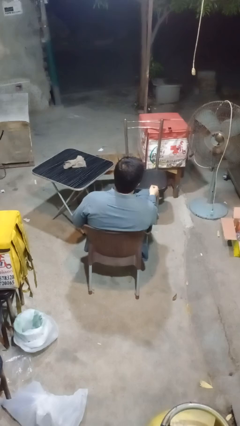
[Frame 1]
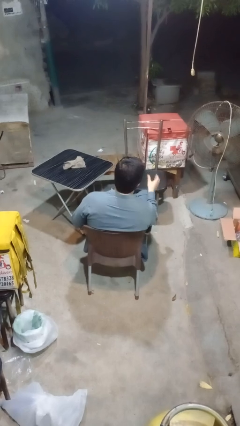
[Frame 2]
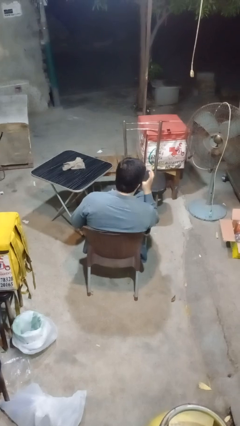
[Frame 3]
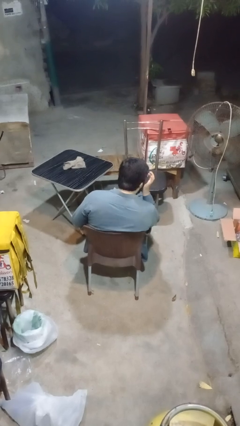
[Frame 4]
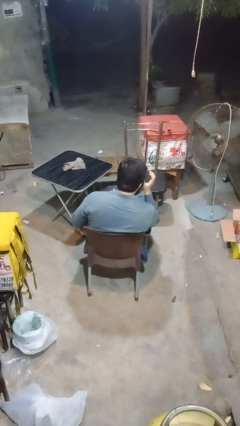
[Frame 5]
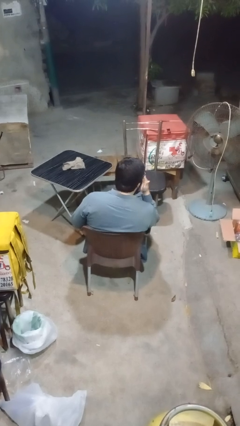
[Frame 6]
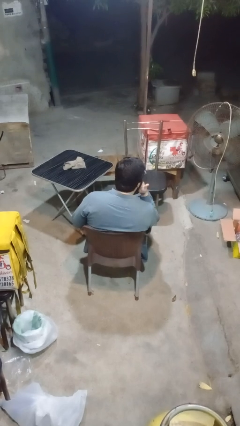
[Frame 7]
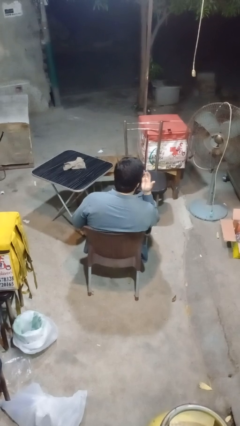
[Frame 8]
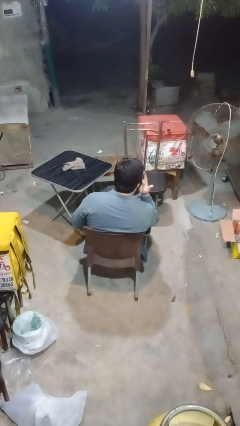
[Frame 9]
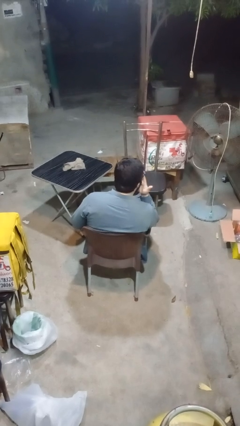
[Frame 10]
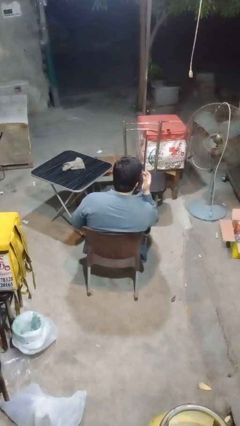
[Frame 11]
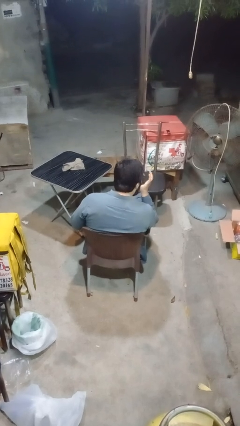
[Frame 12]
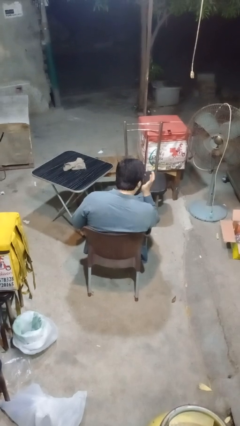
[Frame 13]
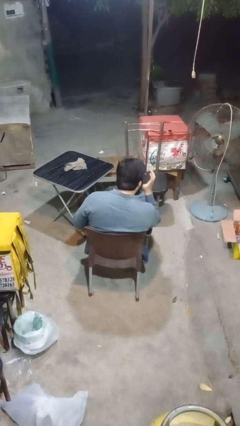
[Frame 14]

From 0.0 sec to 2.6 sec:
person licks fingers

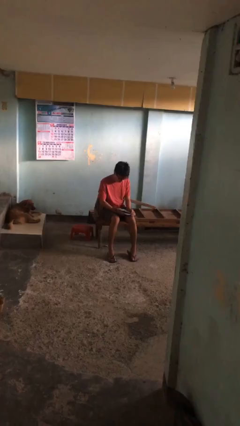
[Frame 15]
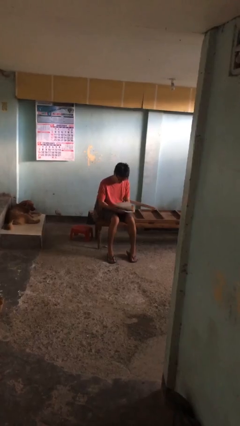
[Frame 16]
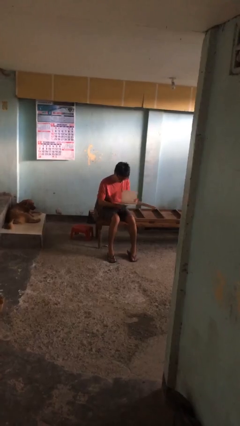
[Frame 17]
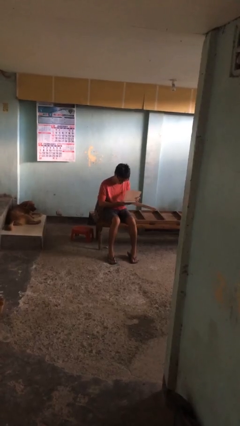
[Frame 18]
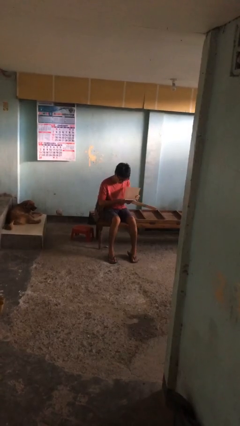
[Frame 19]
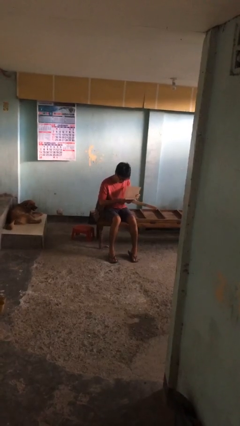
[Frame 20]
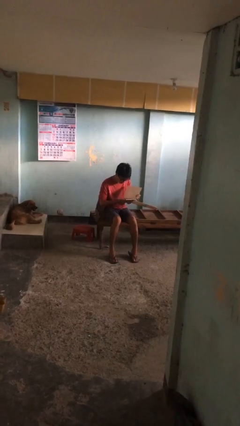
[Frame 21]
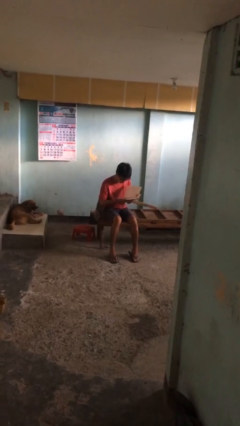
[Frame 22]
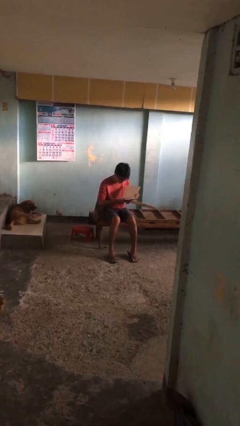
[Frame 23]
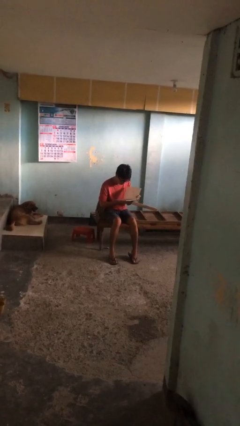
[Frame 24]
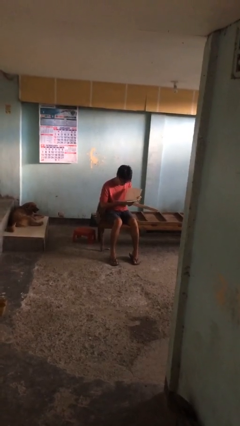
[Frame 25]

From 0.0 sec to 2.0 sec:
person reads document

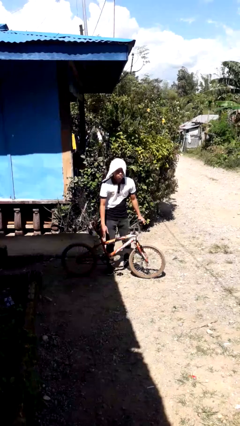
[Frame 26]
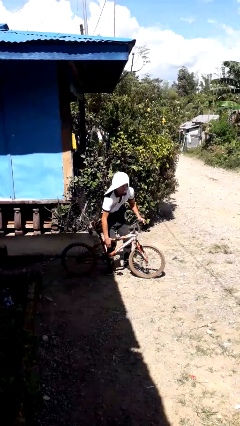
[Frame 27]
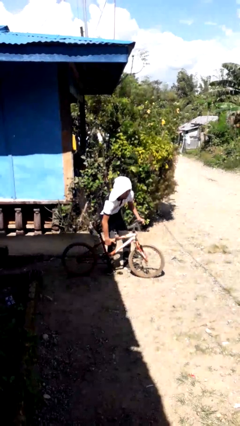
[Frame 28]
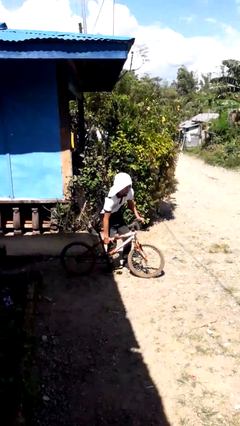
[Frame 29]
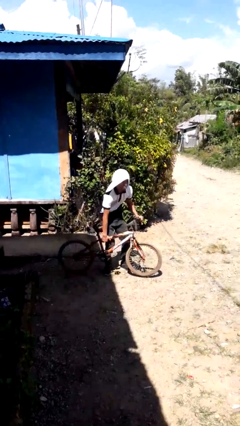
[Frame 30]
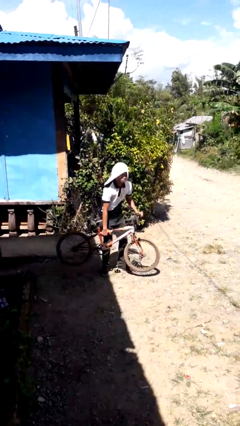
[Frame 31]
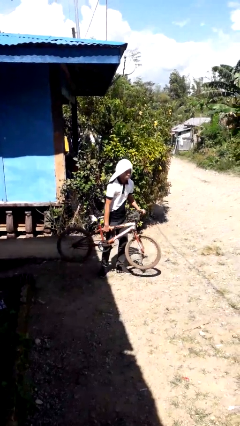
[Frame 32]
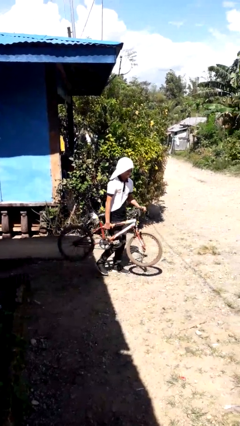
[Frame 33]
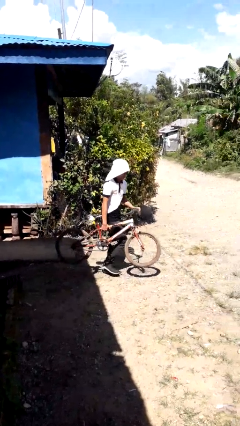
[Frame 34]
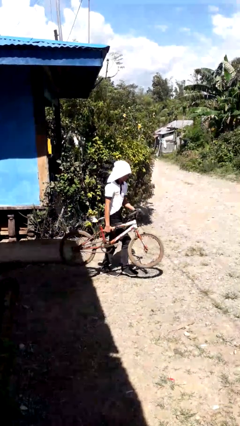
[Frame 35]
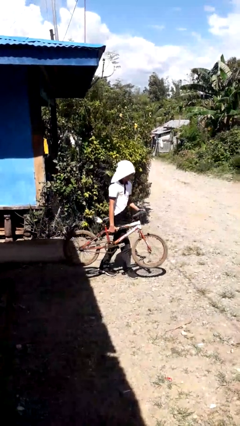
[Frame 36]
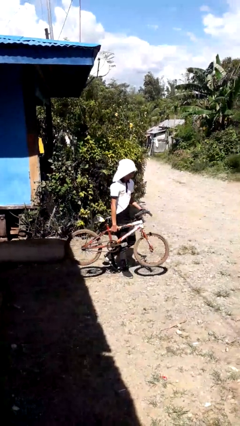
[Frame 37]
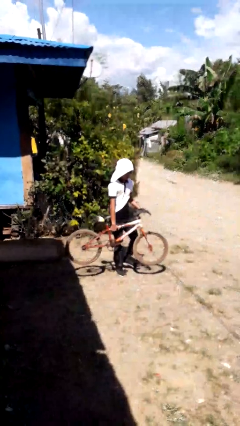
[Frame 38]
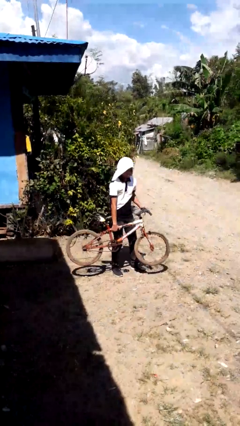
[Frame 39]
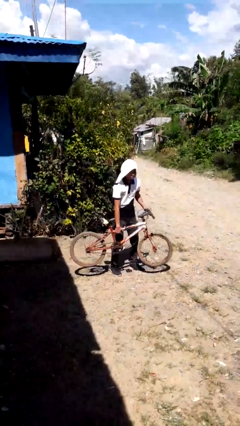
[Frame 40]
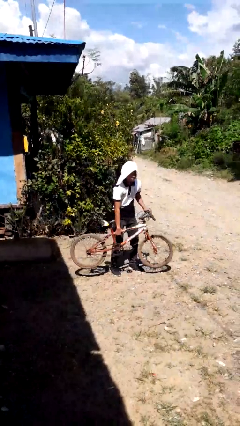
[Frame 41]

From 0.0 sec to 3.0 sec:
person carries bicycle

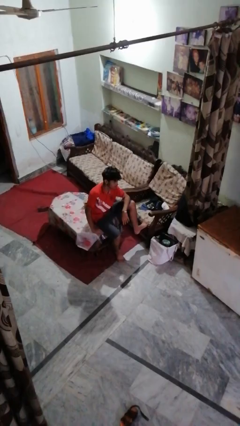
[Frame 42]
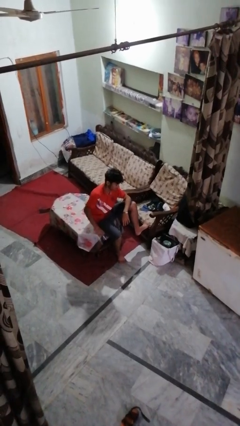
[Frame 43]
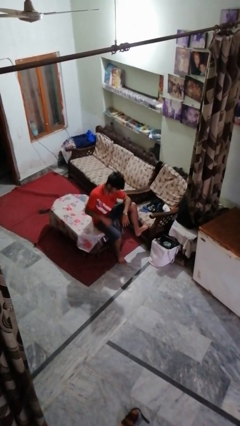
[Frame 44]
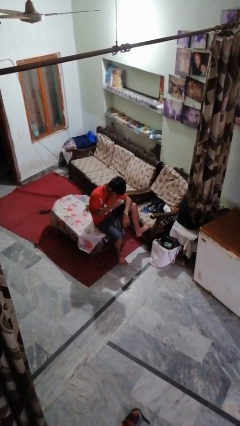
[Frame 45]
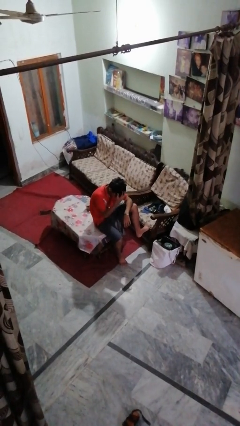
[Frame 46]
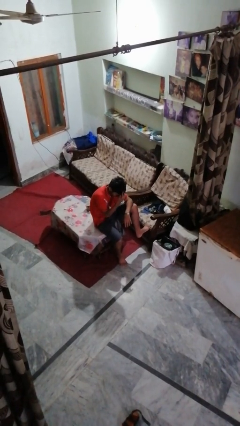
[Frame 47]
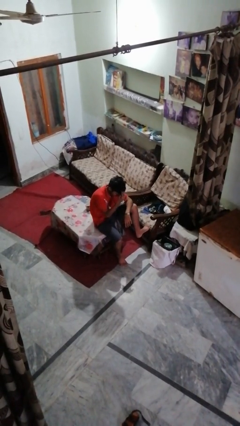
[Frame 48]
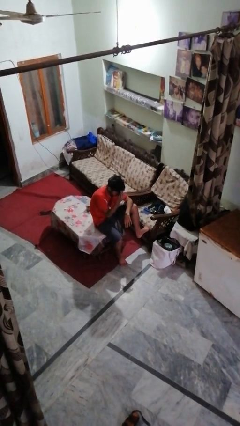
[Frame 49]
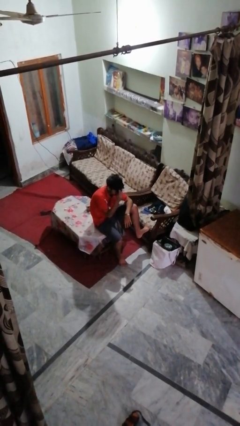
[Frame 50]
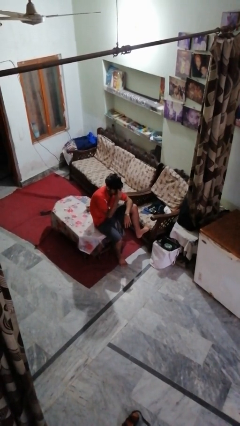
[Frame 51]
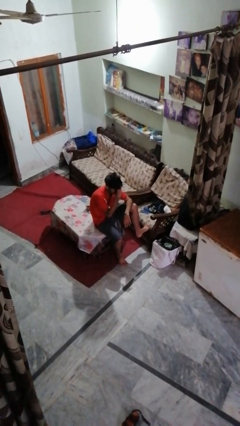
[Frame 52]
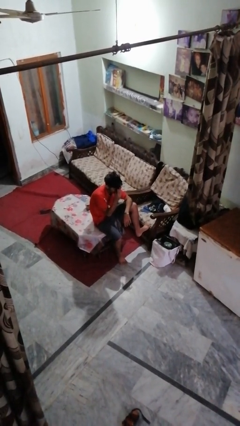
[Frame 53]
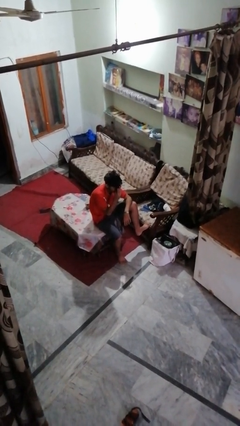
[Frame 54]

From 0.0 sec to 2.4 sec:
person strokes hair

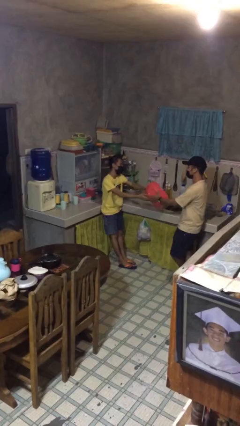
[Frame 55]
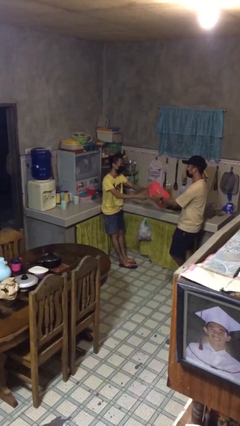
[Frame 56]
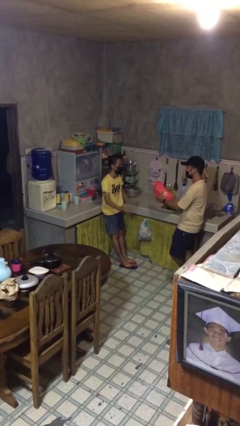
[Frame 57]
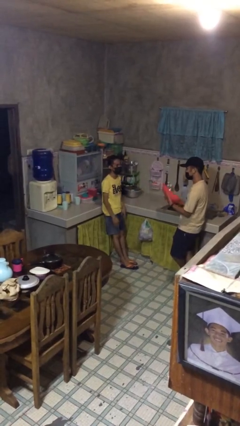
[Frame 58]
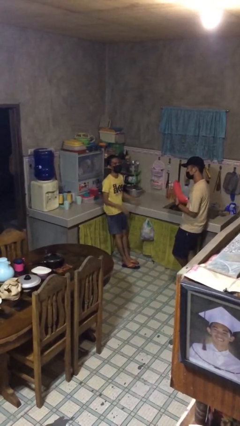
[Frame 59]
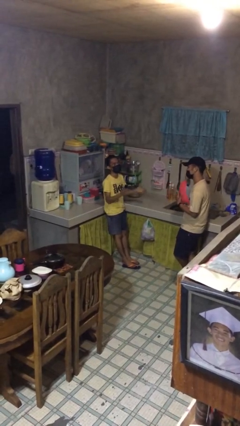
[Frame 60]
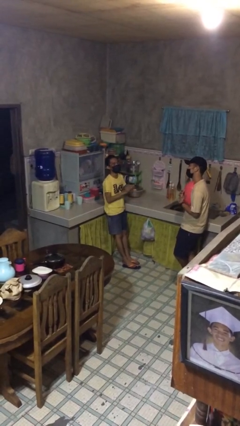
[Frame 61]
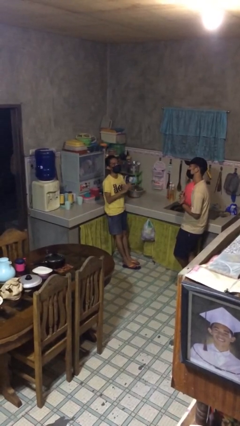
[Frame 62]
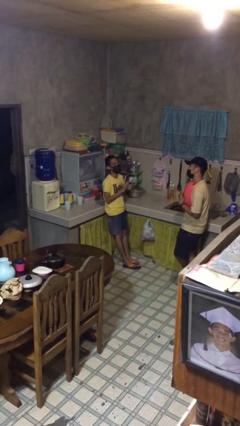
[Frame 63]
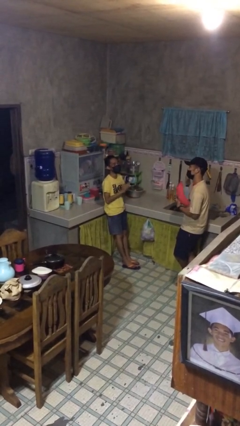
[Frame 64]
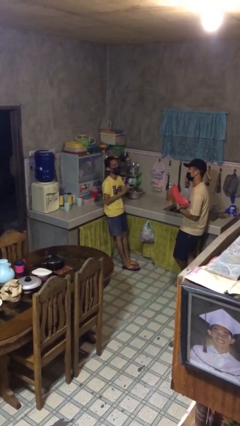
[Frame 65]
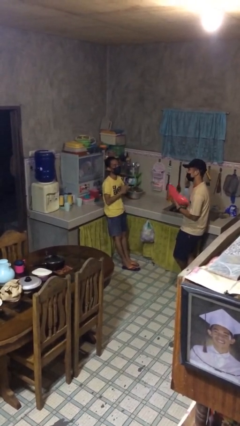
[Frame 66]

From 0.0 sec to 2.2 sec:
person transfers object to person

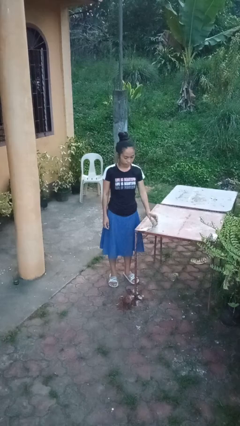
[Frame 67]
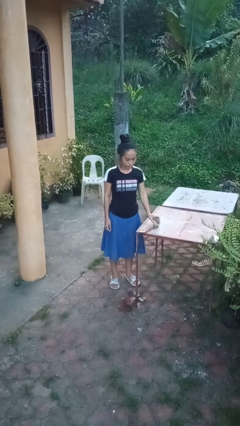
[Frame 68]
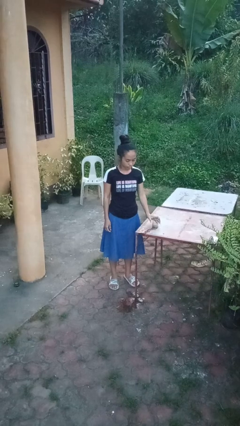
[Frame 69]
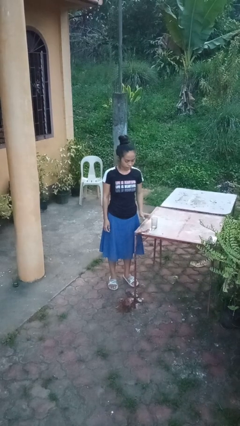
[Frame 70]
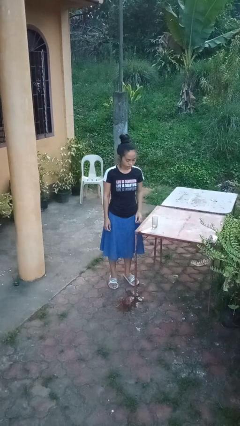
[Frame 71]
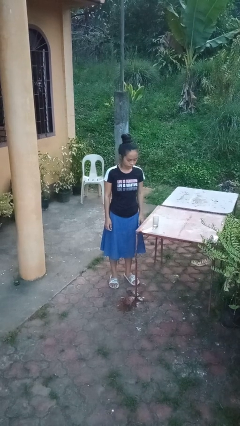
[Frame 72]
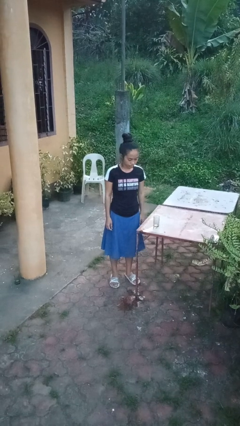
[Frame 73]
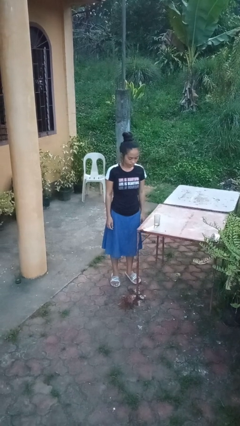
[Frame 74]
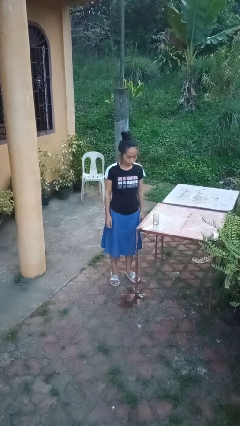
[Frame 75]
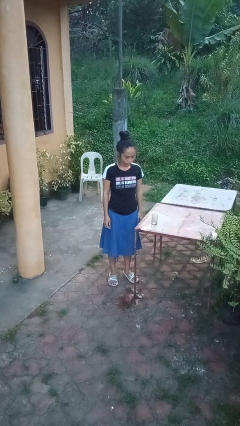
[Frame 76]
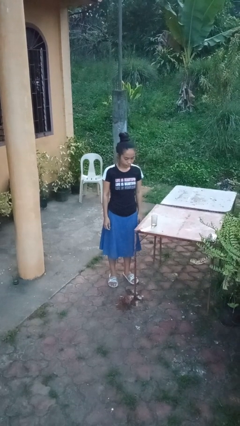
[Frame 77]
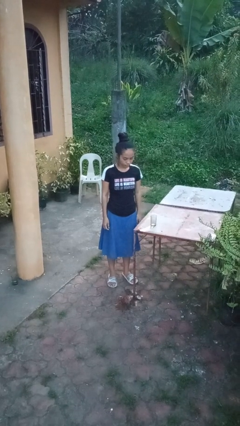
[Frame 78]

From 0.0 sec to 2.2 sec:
person sets upright glass

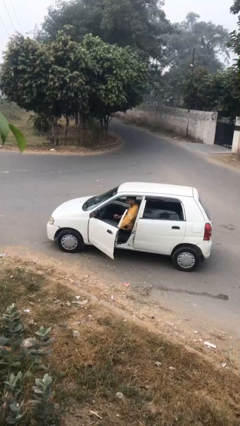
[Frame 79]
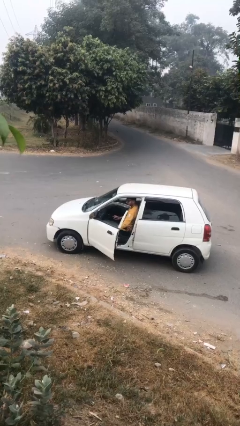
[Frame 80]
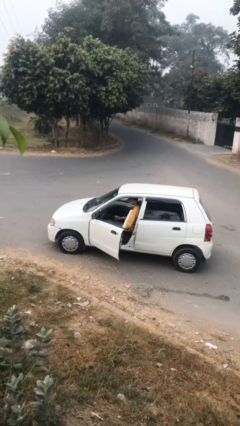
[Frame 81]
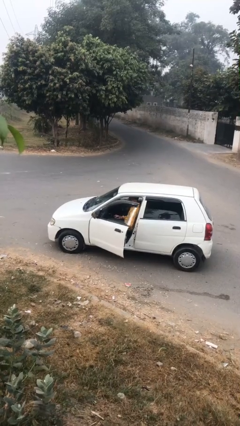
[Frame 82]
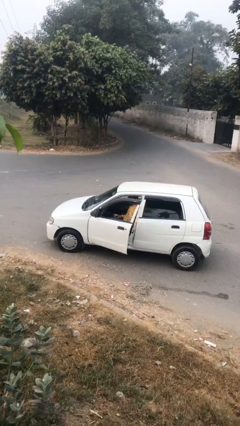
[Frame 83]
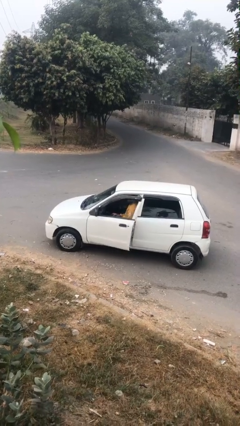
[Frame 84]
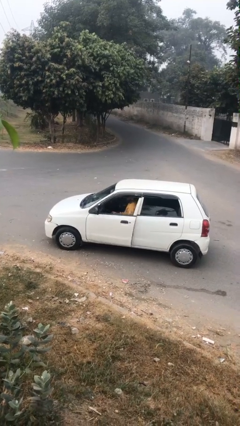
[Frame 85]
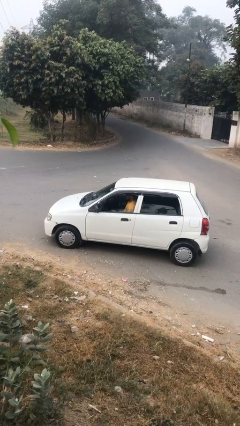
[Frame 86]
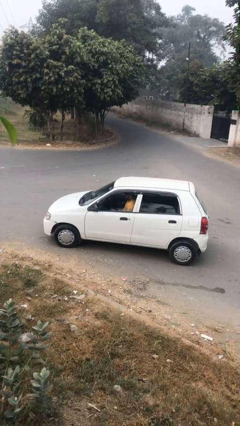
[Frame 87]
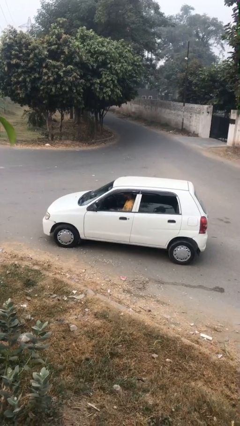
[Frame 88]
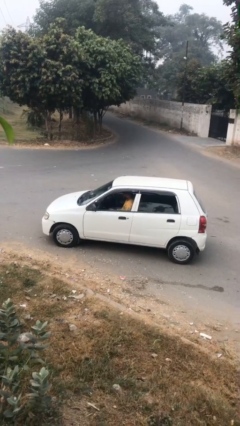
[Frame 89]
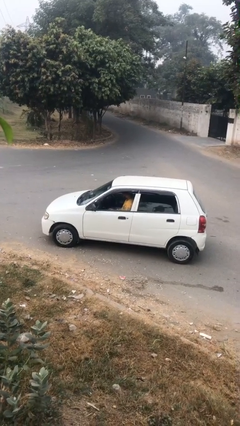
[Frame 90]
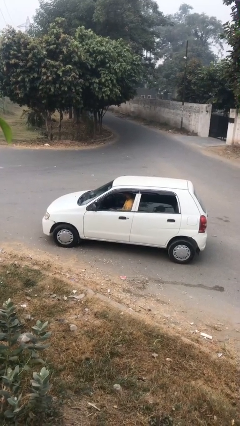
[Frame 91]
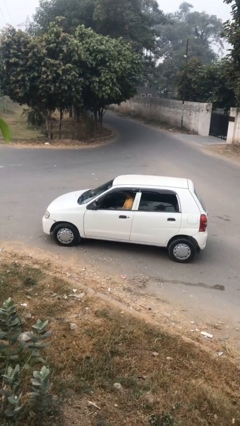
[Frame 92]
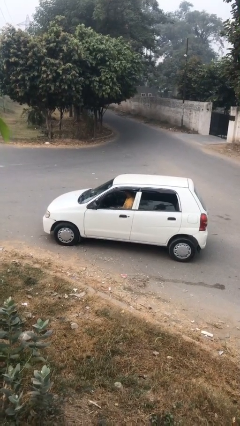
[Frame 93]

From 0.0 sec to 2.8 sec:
person closes car door
